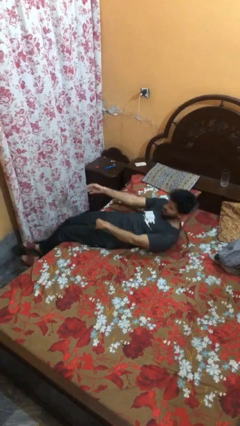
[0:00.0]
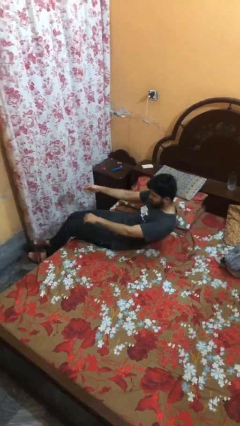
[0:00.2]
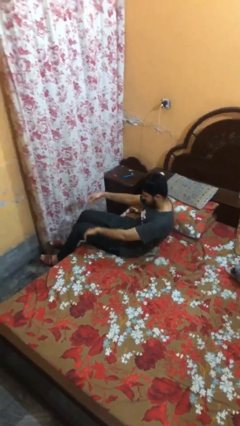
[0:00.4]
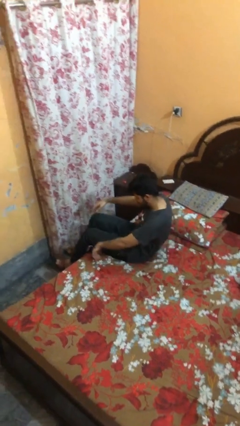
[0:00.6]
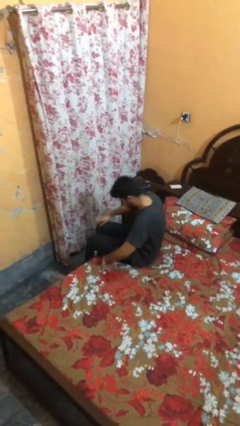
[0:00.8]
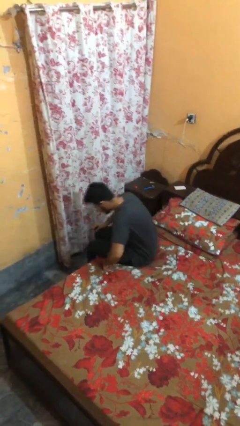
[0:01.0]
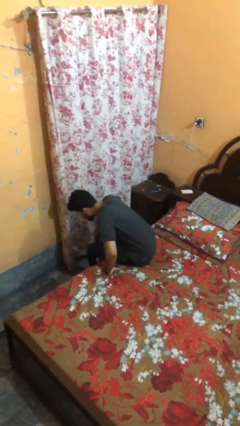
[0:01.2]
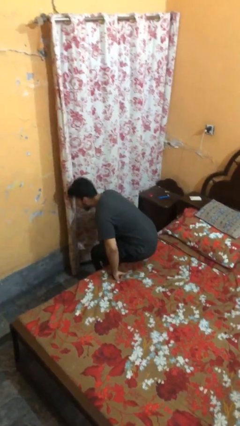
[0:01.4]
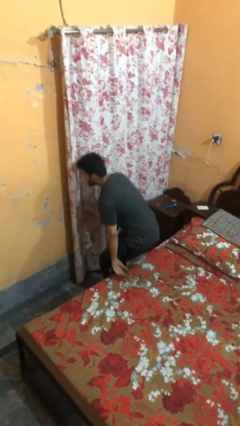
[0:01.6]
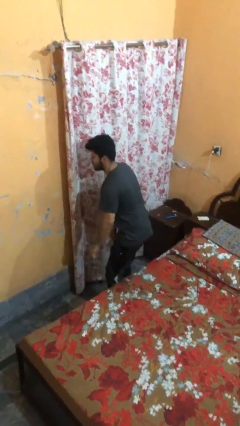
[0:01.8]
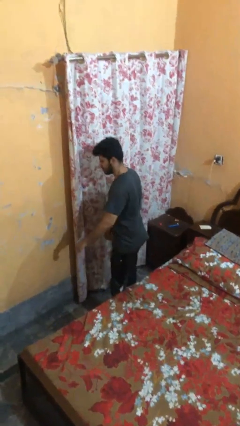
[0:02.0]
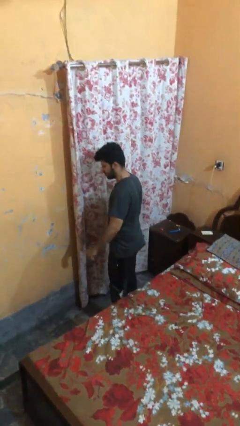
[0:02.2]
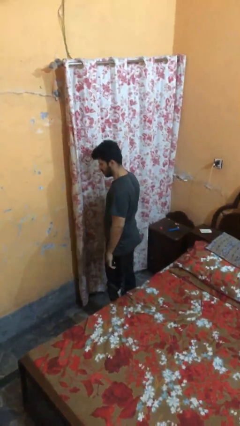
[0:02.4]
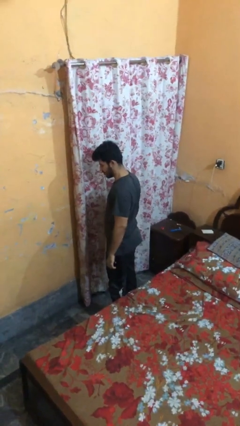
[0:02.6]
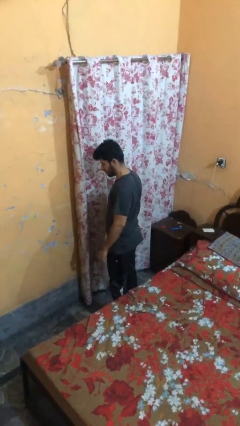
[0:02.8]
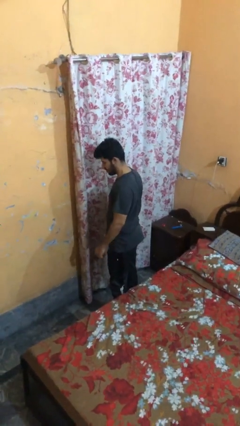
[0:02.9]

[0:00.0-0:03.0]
person stands up

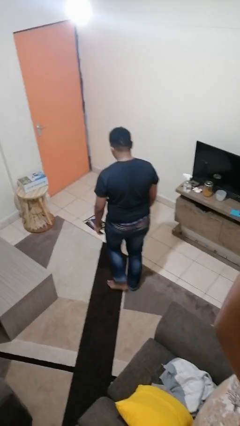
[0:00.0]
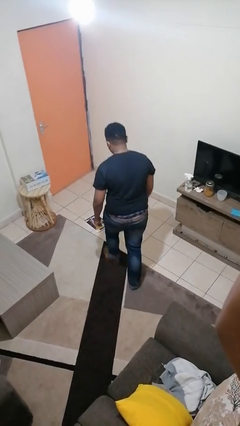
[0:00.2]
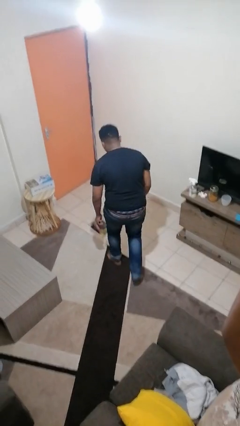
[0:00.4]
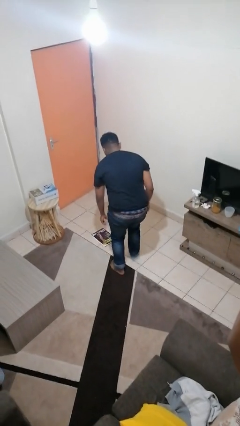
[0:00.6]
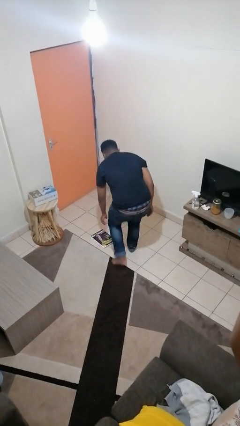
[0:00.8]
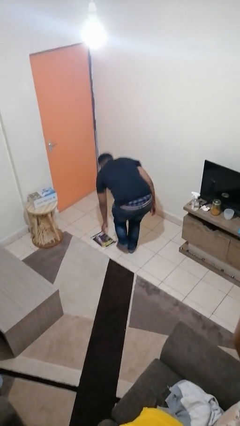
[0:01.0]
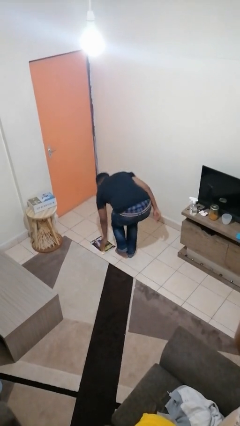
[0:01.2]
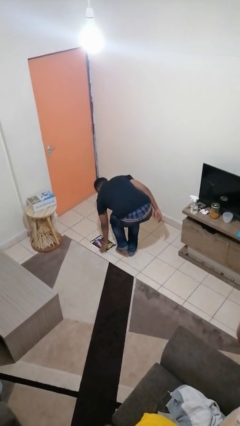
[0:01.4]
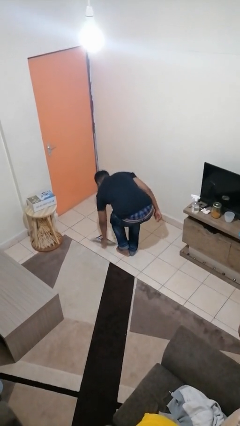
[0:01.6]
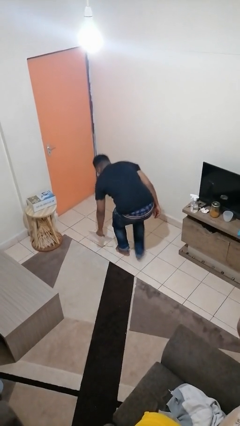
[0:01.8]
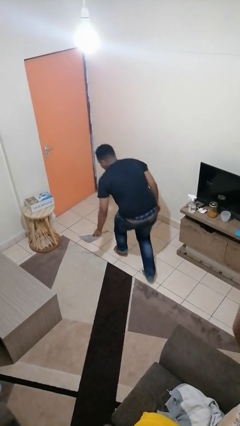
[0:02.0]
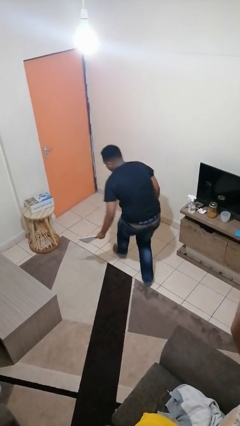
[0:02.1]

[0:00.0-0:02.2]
person picks up object from floor

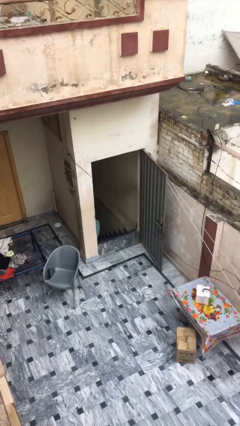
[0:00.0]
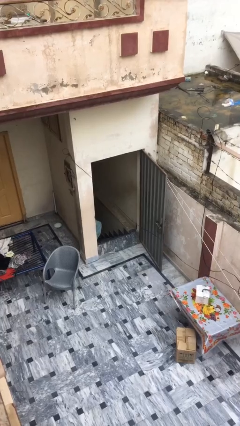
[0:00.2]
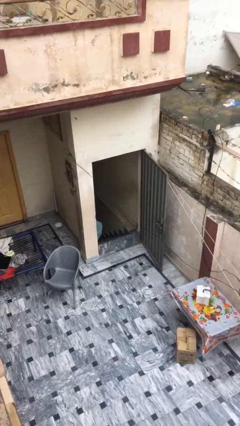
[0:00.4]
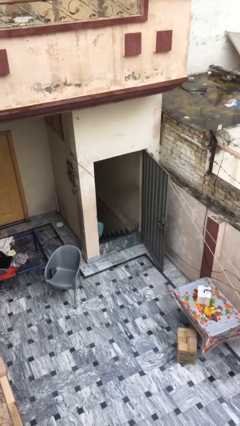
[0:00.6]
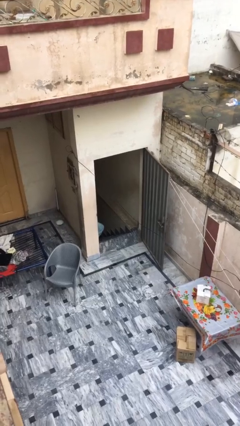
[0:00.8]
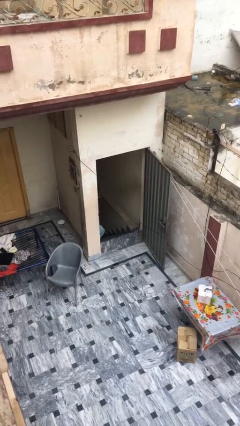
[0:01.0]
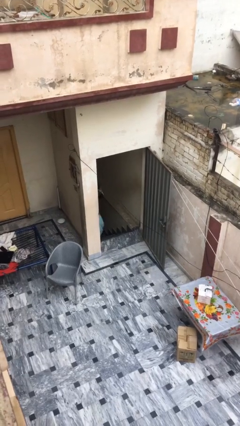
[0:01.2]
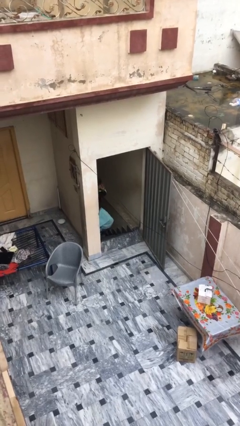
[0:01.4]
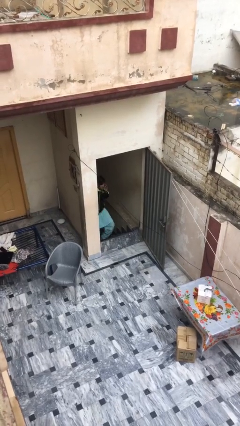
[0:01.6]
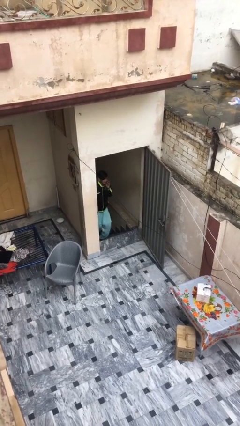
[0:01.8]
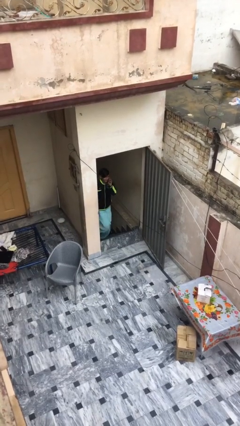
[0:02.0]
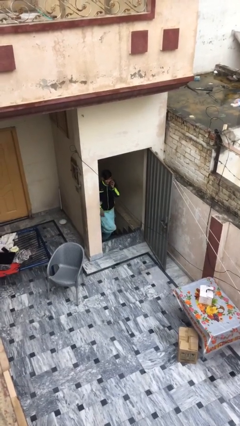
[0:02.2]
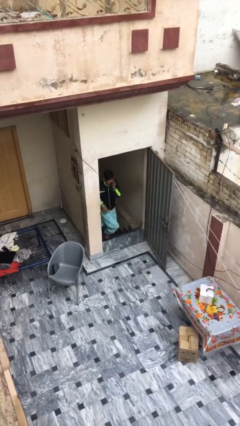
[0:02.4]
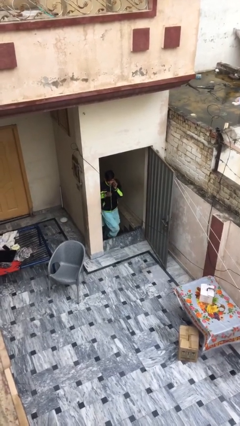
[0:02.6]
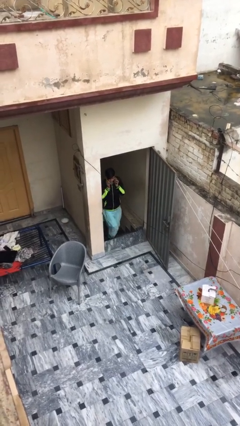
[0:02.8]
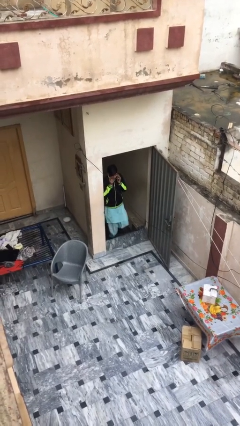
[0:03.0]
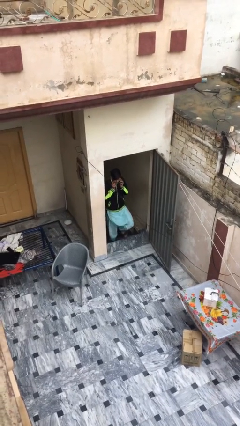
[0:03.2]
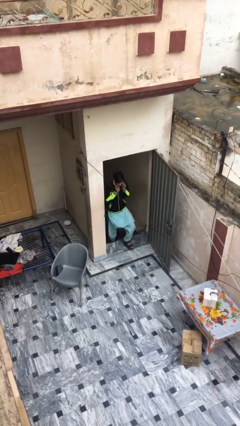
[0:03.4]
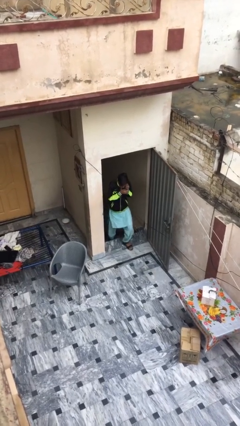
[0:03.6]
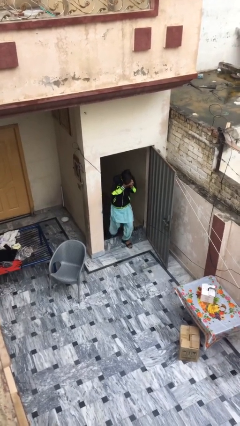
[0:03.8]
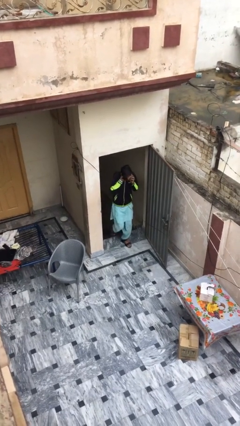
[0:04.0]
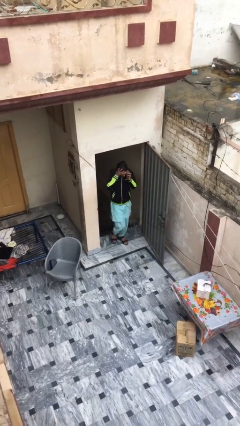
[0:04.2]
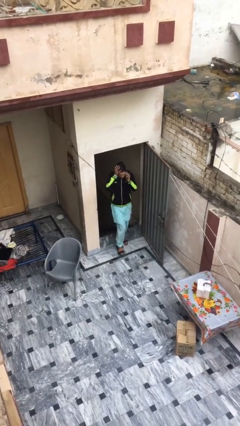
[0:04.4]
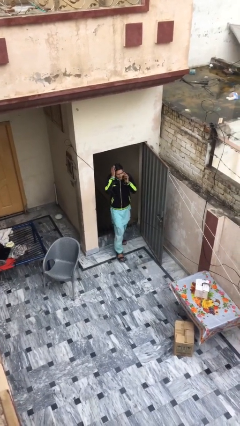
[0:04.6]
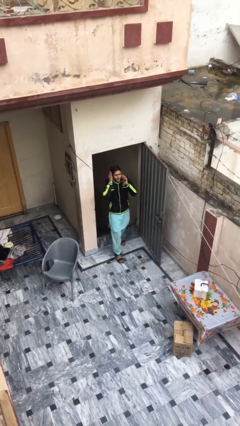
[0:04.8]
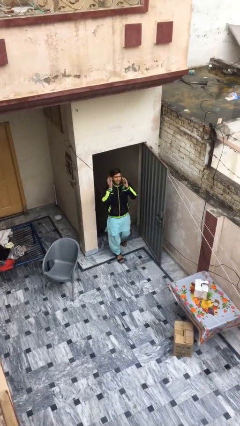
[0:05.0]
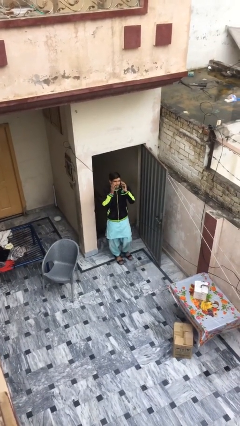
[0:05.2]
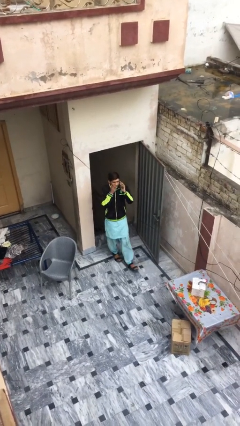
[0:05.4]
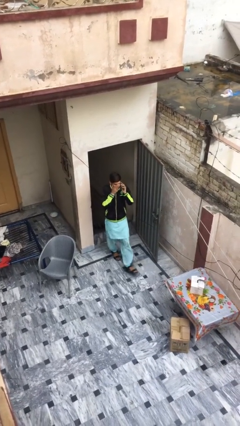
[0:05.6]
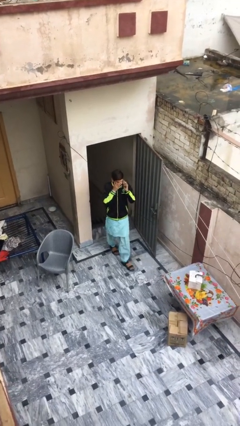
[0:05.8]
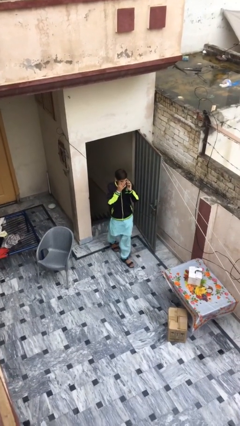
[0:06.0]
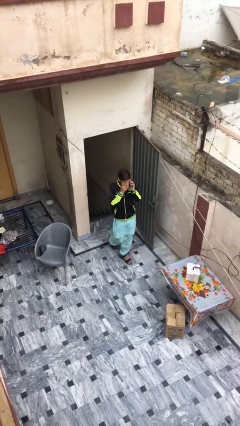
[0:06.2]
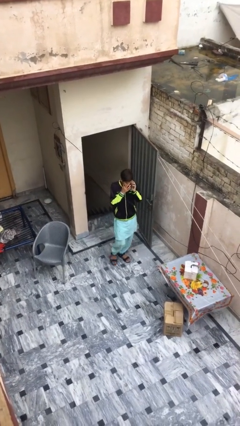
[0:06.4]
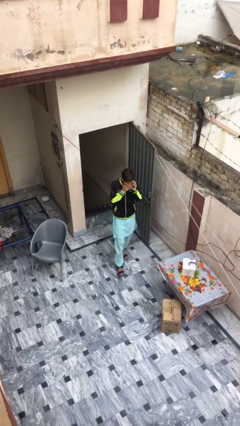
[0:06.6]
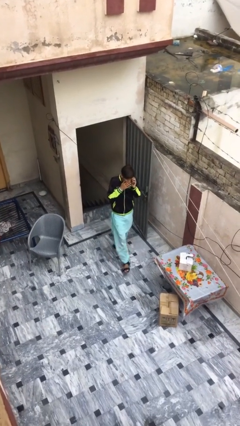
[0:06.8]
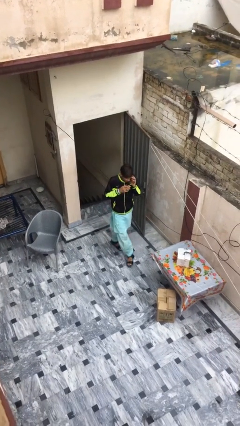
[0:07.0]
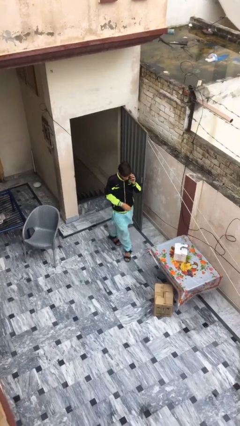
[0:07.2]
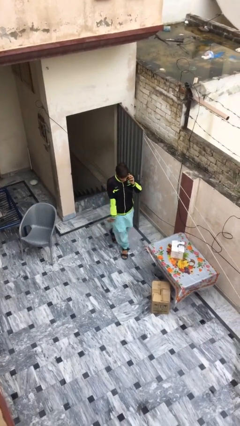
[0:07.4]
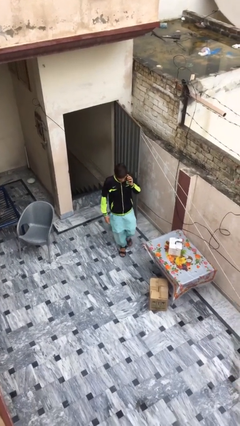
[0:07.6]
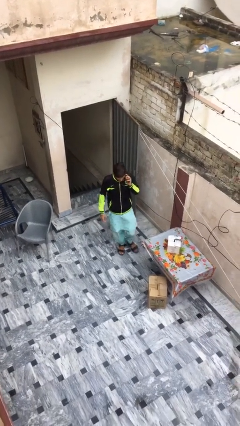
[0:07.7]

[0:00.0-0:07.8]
person enters scene through structure

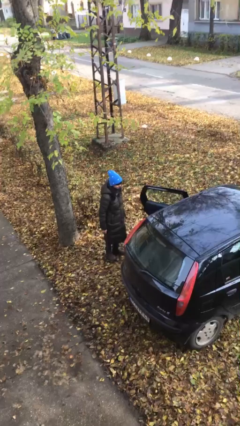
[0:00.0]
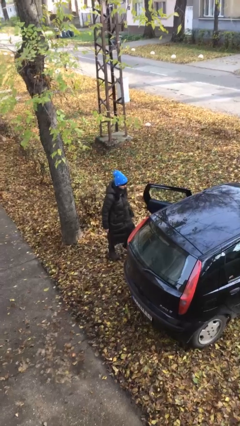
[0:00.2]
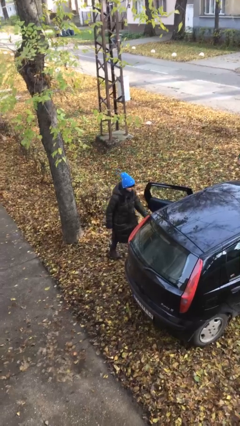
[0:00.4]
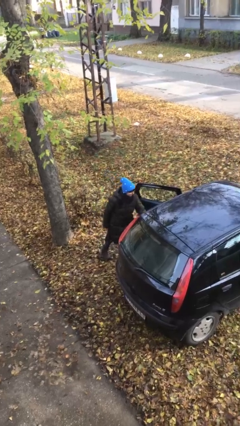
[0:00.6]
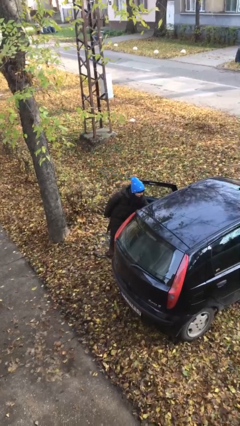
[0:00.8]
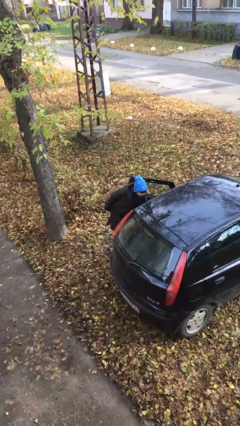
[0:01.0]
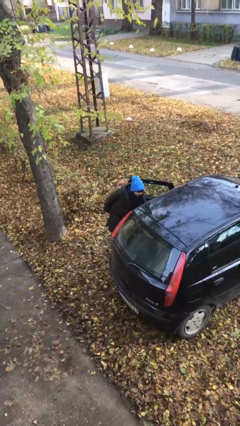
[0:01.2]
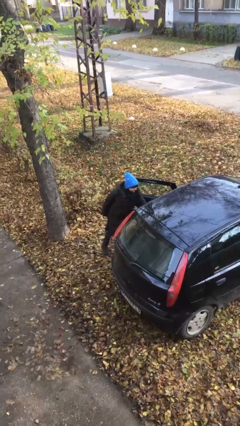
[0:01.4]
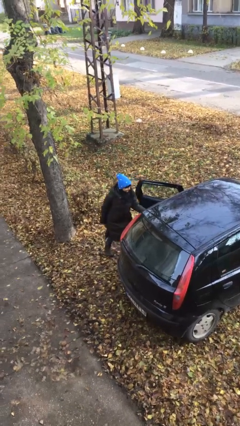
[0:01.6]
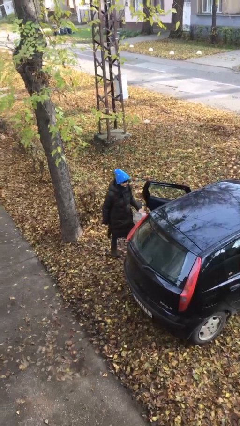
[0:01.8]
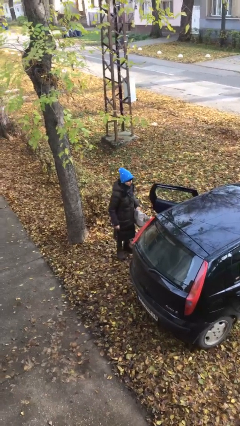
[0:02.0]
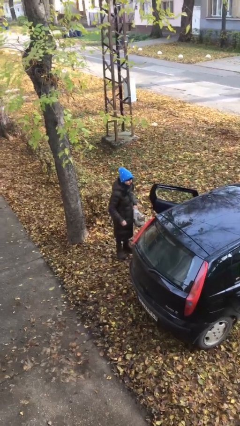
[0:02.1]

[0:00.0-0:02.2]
person unloads car

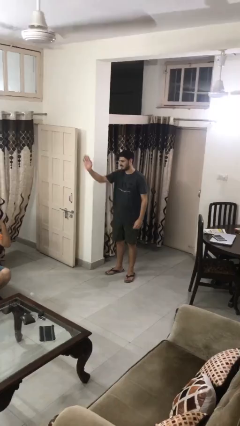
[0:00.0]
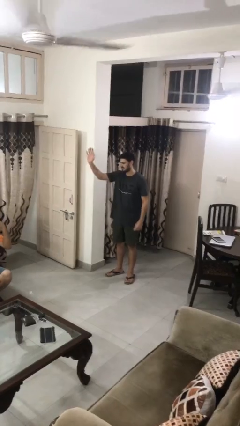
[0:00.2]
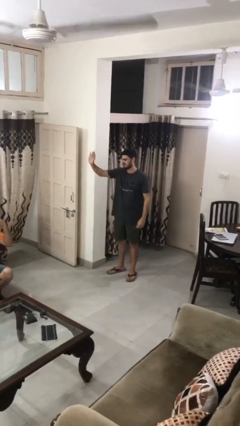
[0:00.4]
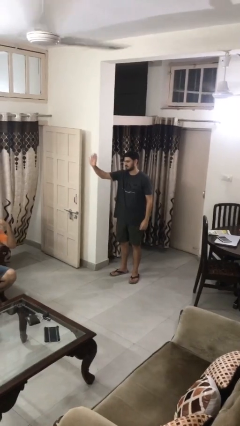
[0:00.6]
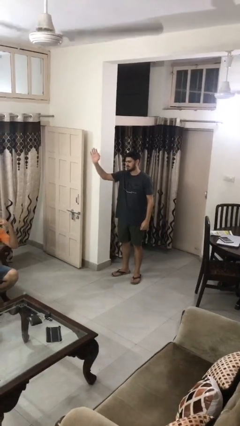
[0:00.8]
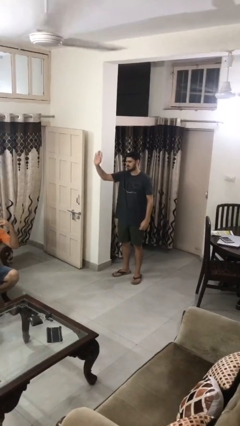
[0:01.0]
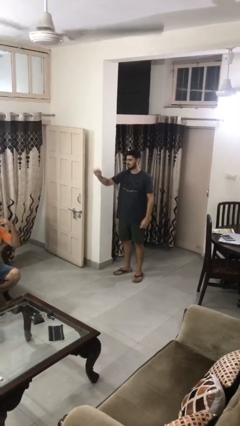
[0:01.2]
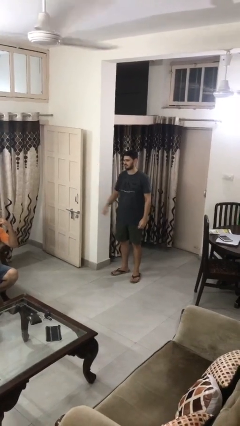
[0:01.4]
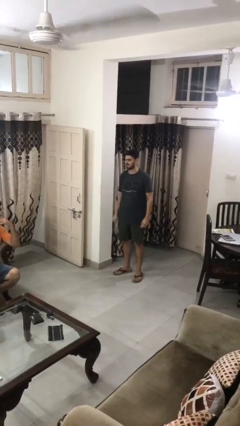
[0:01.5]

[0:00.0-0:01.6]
person waves at person

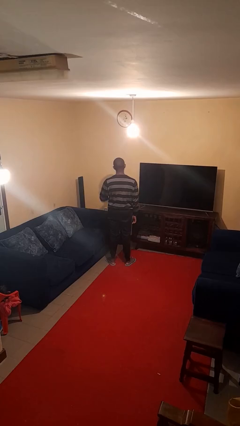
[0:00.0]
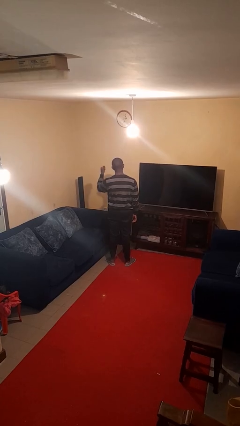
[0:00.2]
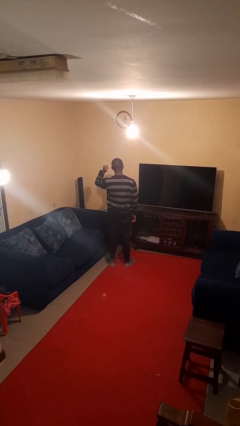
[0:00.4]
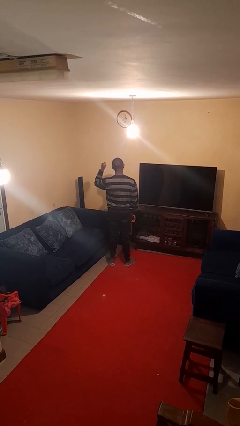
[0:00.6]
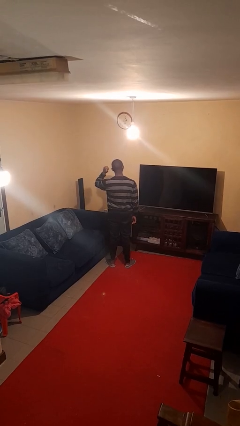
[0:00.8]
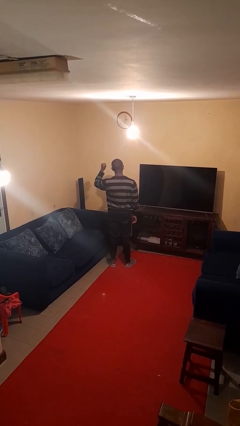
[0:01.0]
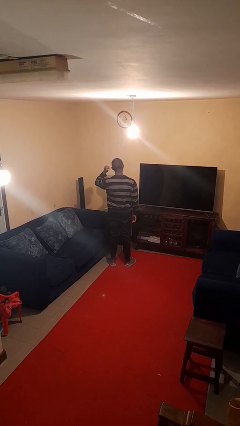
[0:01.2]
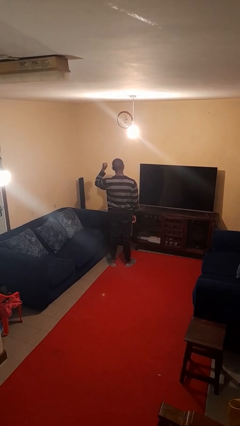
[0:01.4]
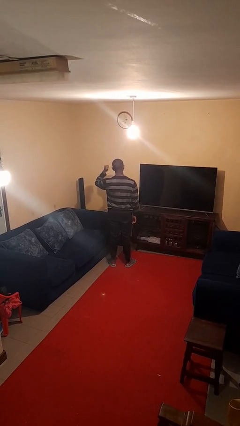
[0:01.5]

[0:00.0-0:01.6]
person gestures behind me
